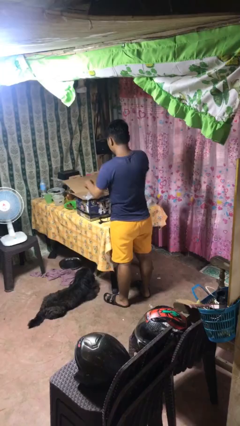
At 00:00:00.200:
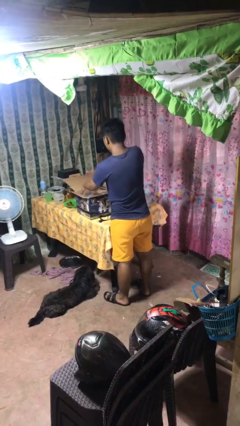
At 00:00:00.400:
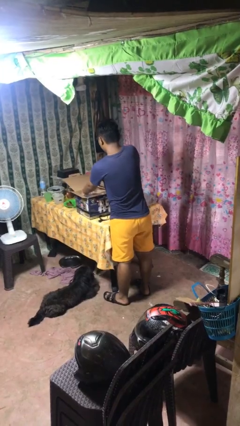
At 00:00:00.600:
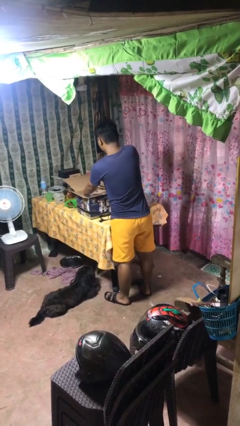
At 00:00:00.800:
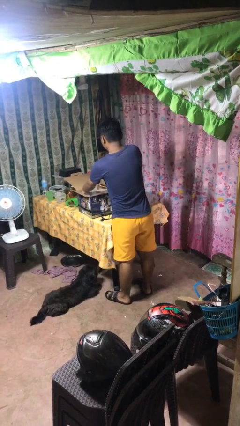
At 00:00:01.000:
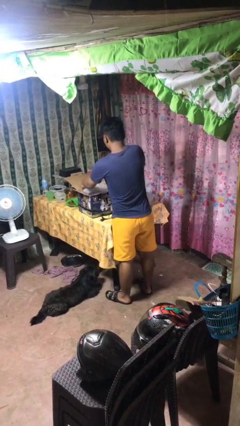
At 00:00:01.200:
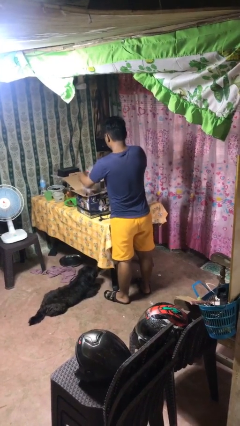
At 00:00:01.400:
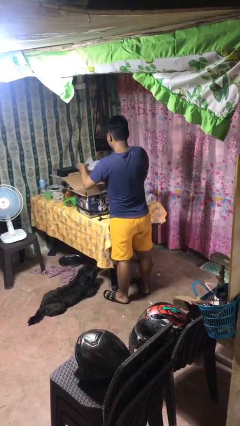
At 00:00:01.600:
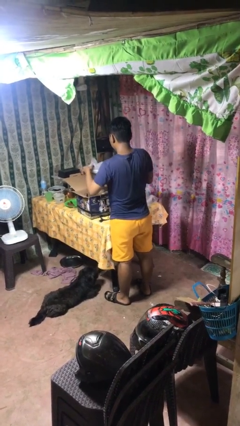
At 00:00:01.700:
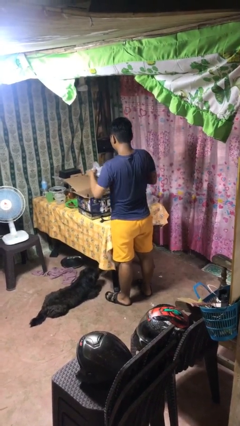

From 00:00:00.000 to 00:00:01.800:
person takes object from box

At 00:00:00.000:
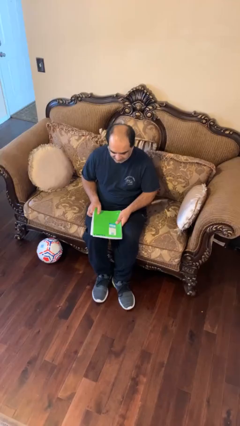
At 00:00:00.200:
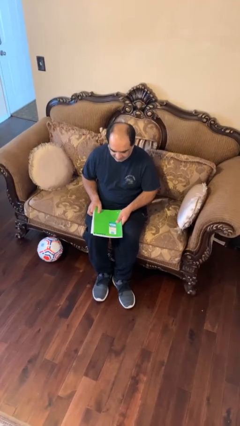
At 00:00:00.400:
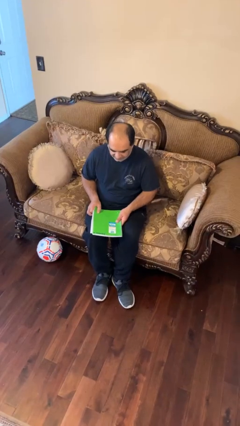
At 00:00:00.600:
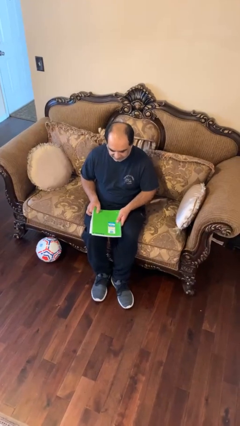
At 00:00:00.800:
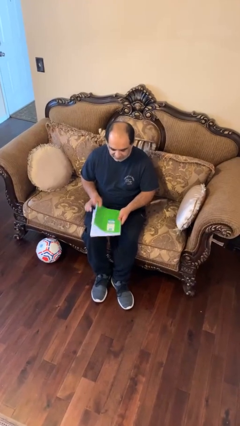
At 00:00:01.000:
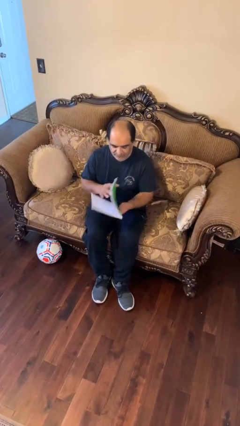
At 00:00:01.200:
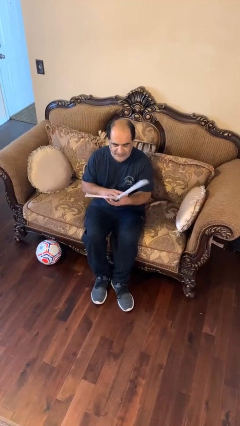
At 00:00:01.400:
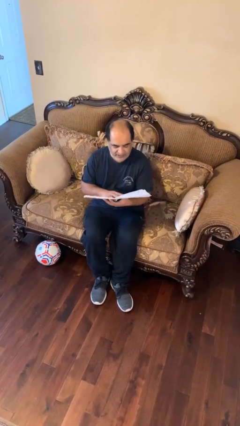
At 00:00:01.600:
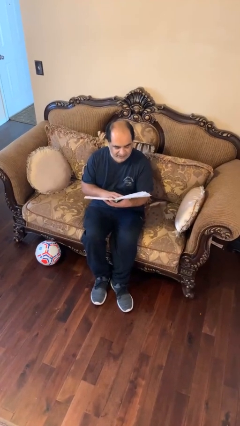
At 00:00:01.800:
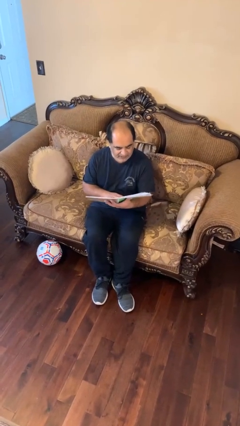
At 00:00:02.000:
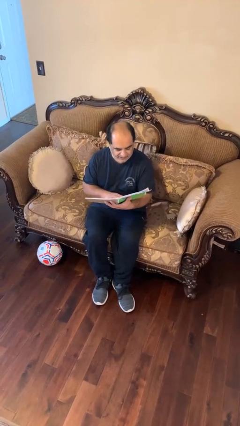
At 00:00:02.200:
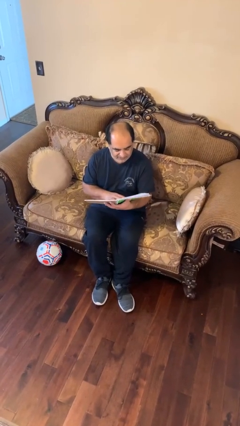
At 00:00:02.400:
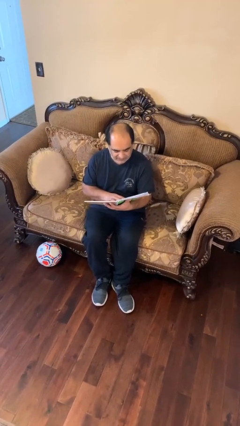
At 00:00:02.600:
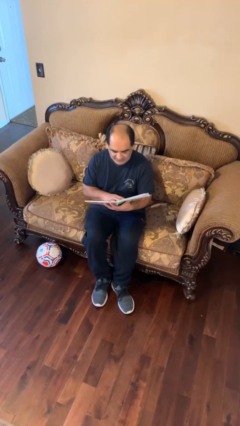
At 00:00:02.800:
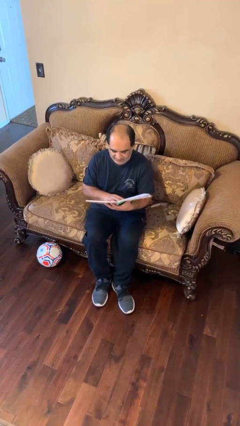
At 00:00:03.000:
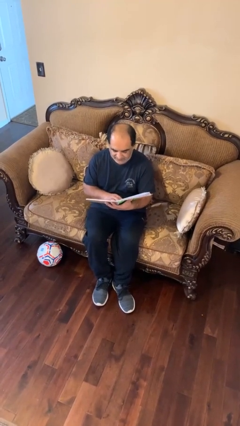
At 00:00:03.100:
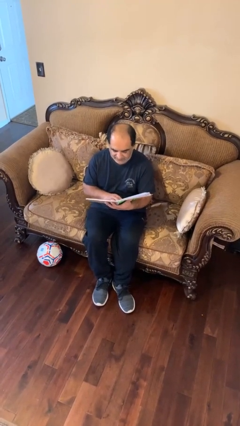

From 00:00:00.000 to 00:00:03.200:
person reads document

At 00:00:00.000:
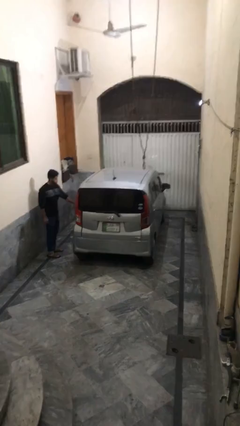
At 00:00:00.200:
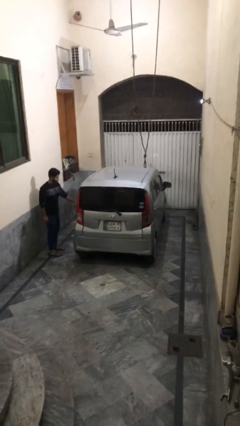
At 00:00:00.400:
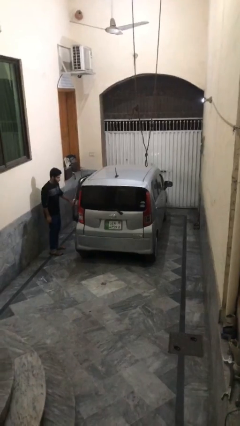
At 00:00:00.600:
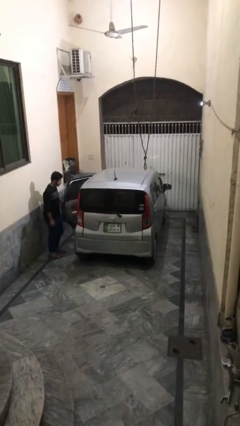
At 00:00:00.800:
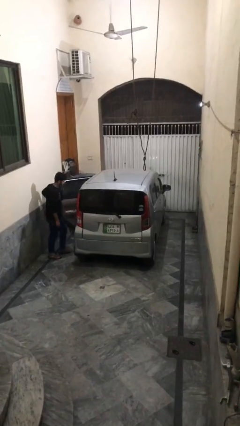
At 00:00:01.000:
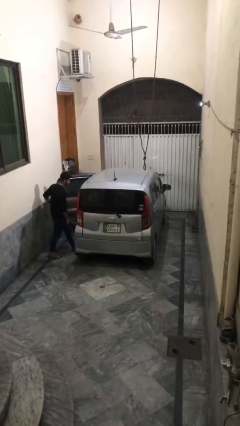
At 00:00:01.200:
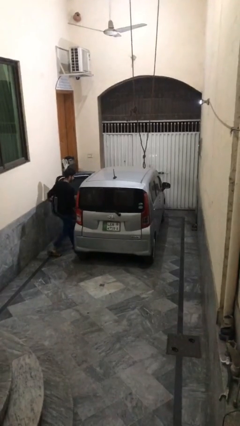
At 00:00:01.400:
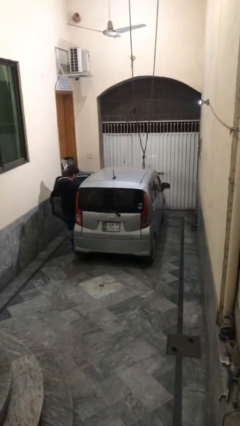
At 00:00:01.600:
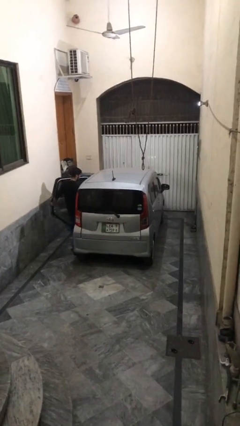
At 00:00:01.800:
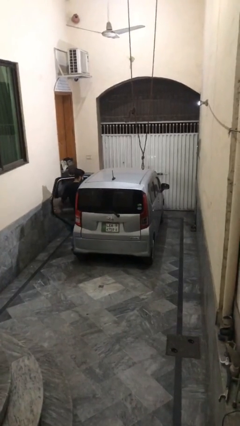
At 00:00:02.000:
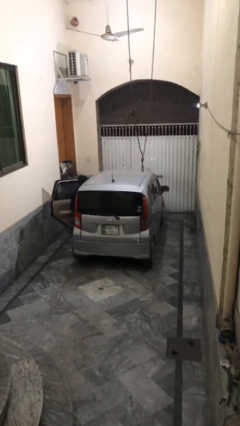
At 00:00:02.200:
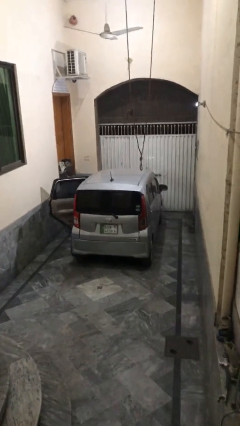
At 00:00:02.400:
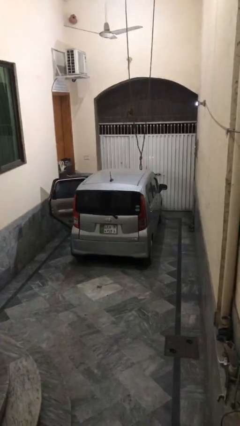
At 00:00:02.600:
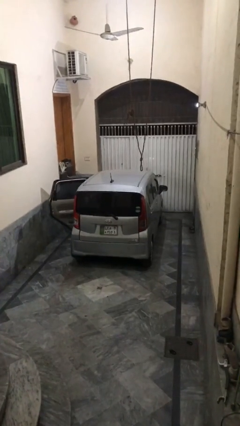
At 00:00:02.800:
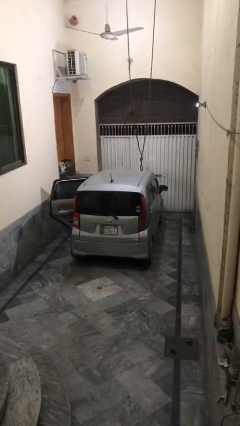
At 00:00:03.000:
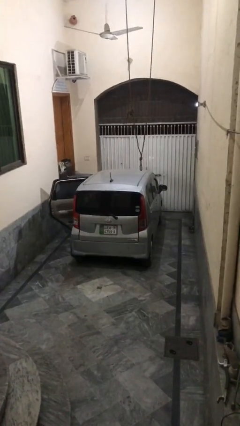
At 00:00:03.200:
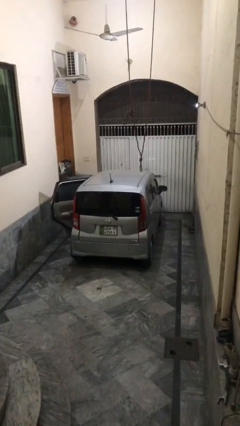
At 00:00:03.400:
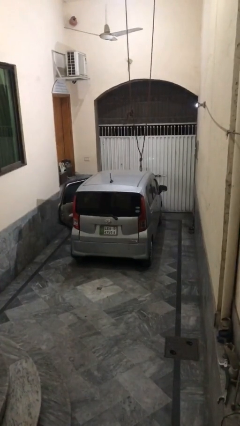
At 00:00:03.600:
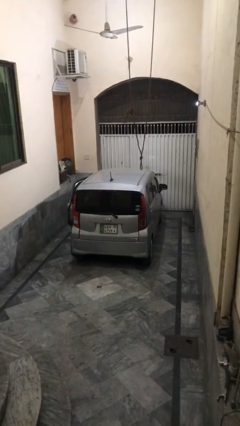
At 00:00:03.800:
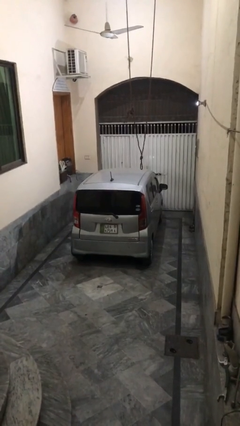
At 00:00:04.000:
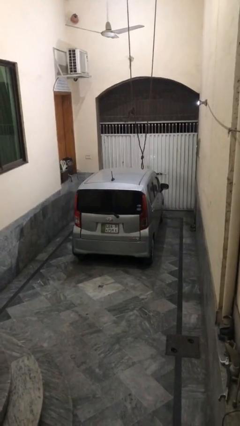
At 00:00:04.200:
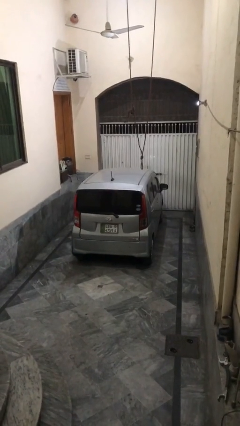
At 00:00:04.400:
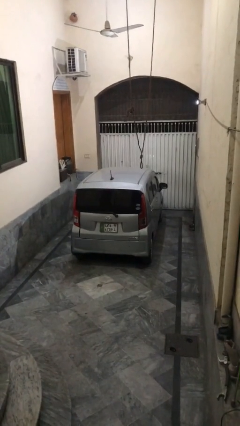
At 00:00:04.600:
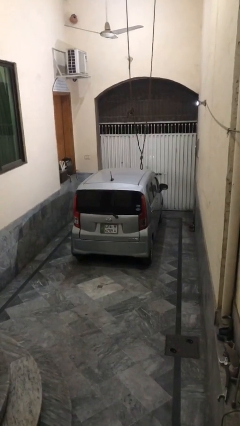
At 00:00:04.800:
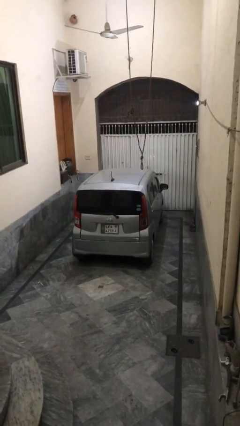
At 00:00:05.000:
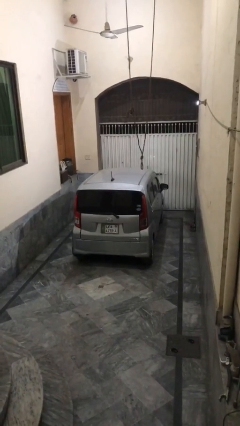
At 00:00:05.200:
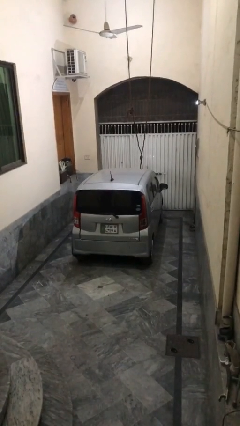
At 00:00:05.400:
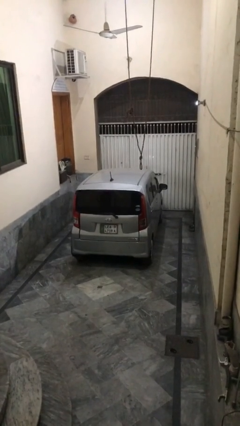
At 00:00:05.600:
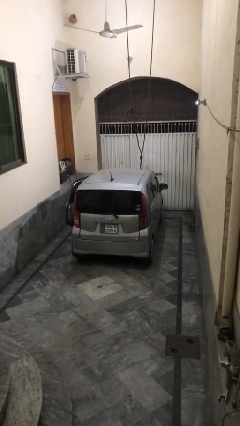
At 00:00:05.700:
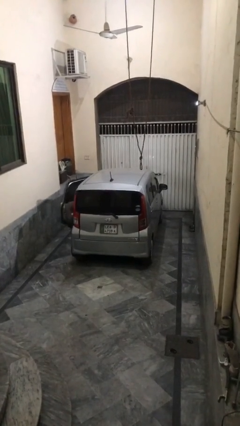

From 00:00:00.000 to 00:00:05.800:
car picks up person

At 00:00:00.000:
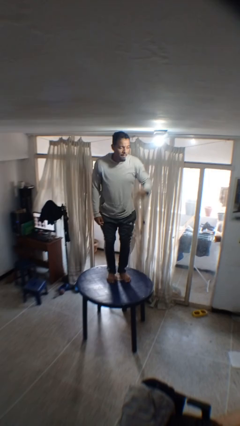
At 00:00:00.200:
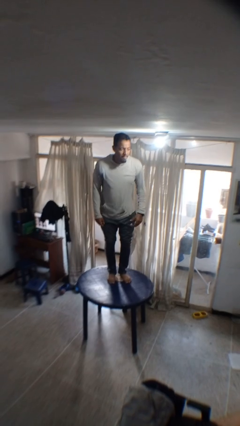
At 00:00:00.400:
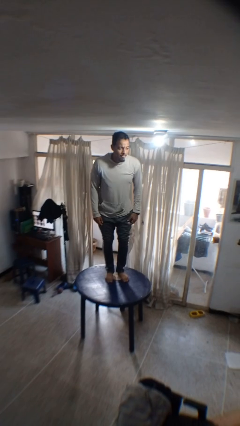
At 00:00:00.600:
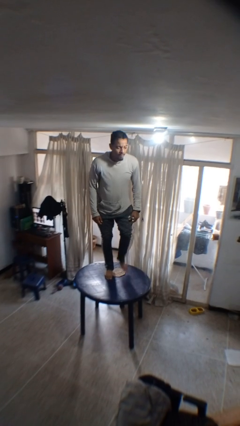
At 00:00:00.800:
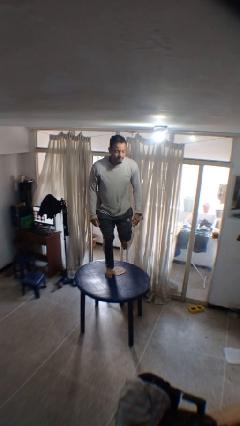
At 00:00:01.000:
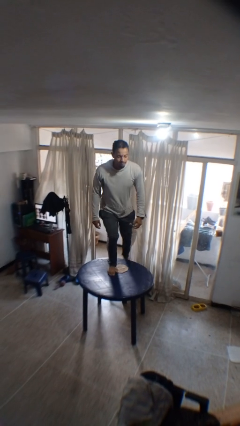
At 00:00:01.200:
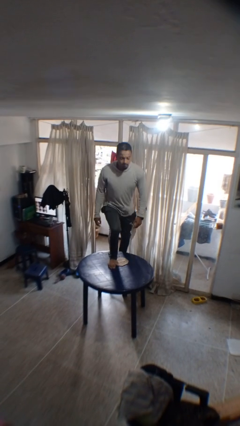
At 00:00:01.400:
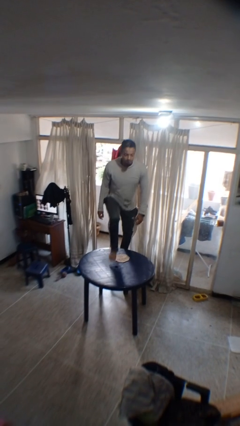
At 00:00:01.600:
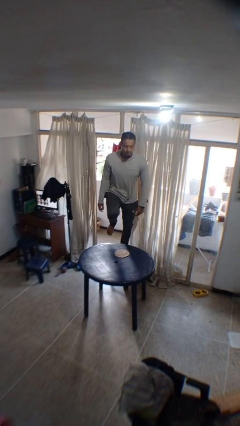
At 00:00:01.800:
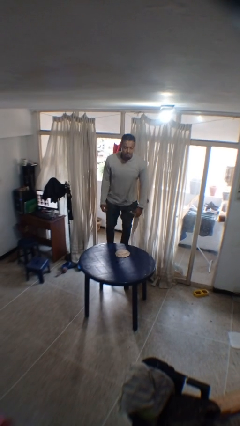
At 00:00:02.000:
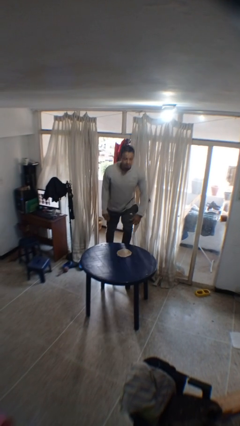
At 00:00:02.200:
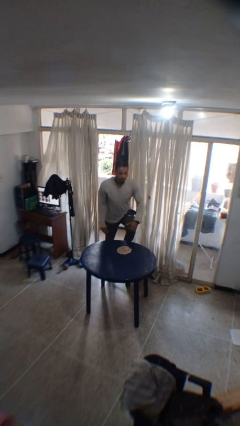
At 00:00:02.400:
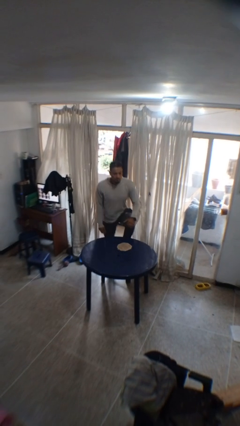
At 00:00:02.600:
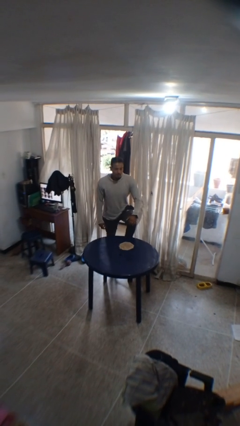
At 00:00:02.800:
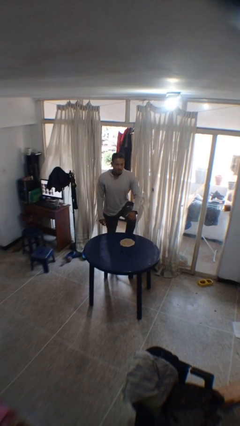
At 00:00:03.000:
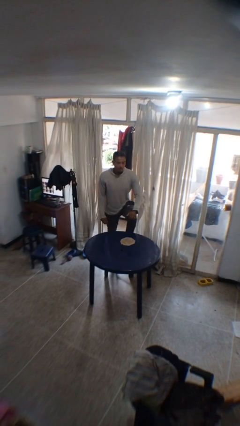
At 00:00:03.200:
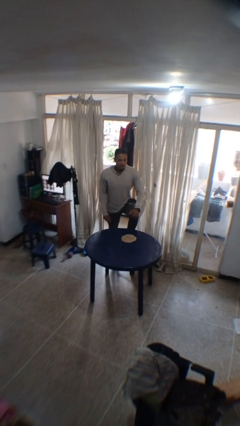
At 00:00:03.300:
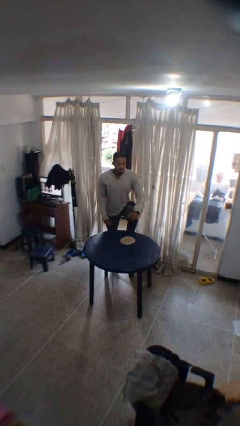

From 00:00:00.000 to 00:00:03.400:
person climbs off table

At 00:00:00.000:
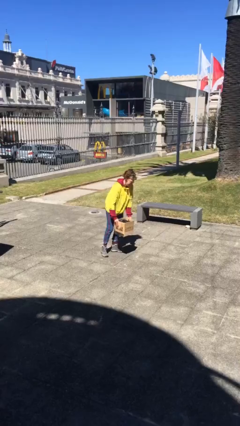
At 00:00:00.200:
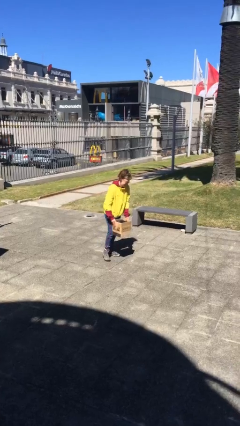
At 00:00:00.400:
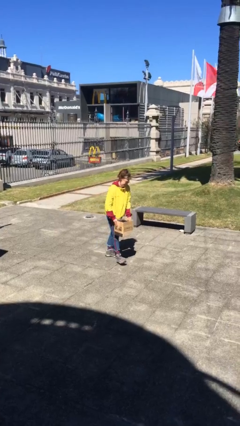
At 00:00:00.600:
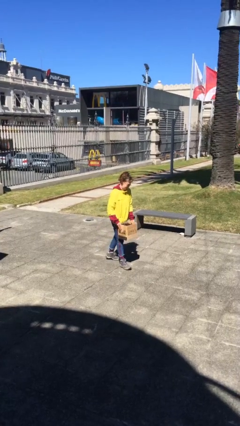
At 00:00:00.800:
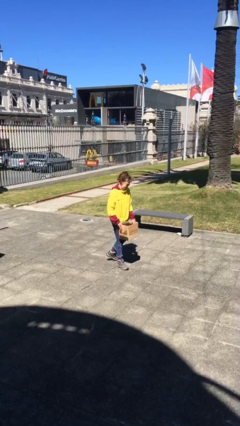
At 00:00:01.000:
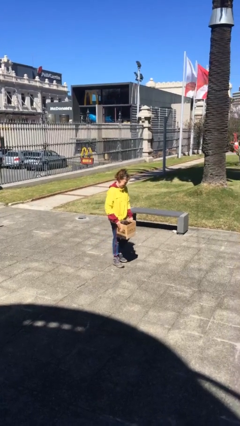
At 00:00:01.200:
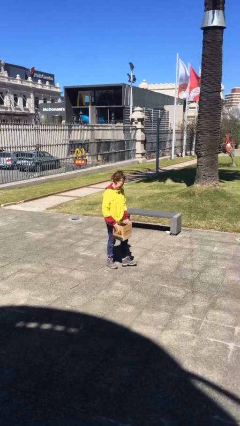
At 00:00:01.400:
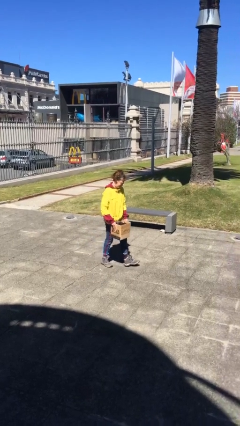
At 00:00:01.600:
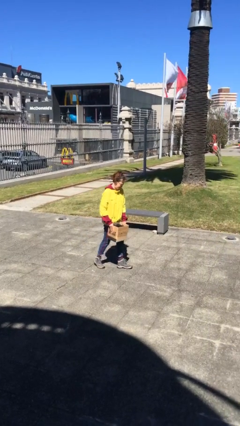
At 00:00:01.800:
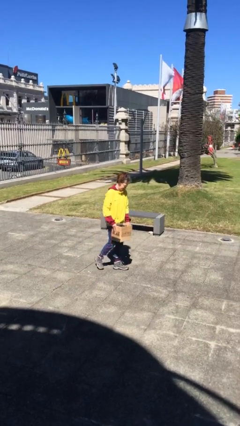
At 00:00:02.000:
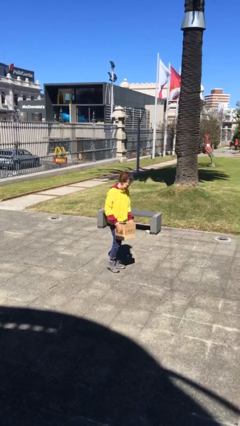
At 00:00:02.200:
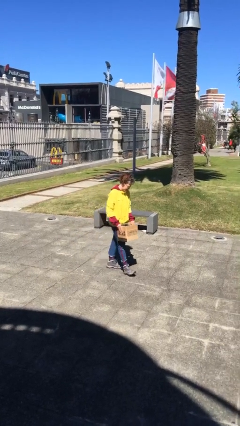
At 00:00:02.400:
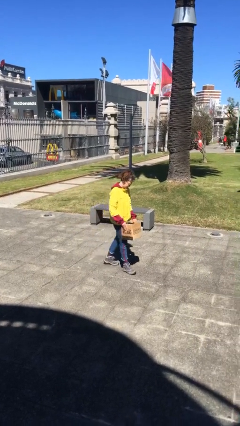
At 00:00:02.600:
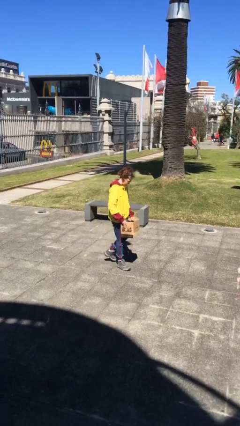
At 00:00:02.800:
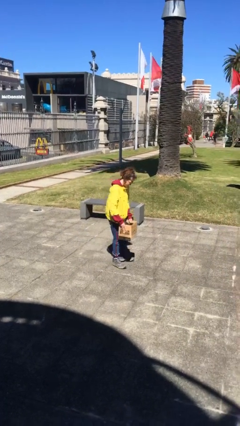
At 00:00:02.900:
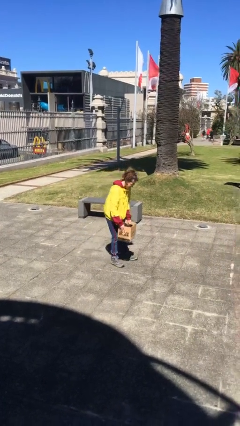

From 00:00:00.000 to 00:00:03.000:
person carries heavy object
